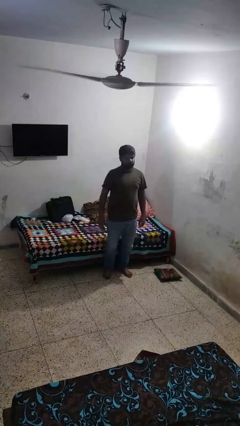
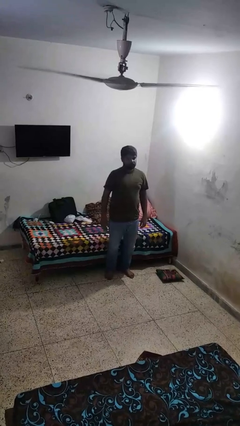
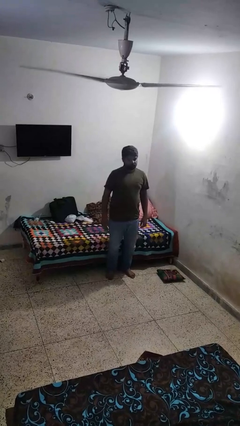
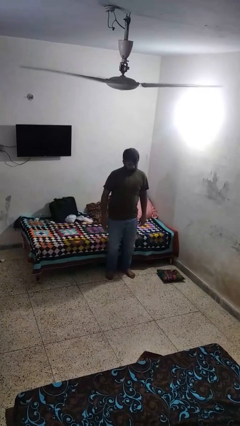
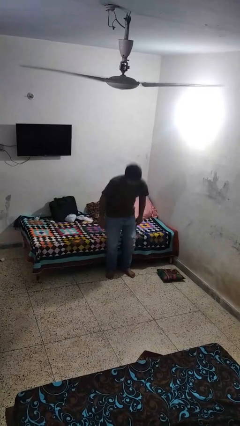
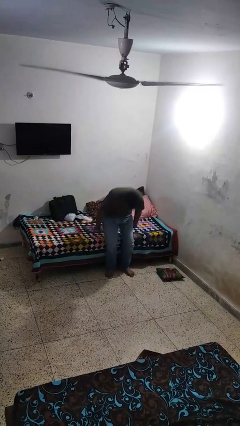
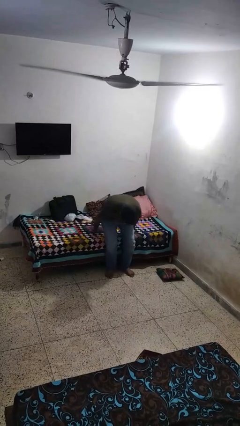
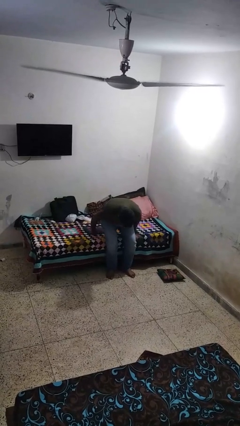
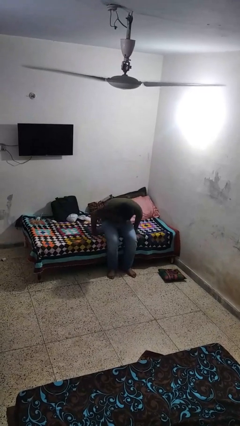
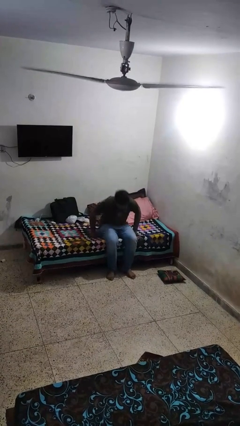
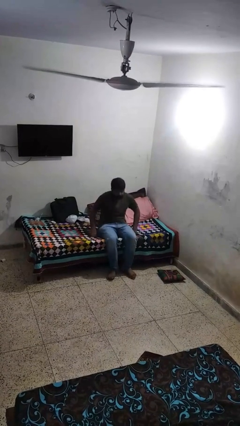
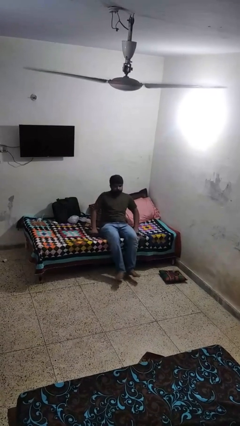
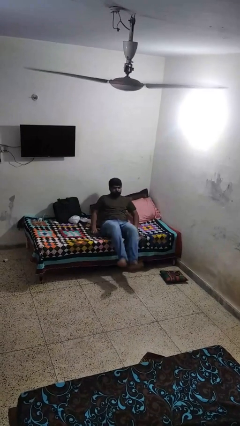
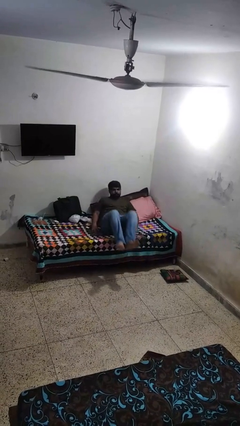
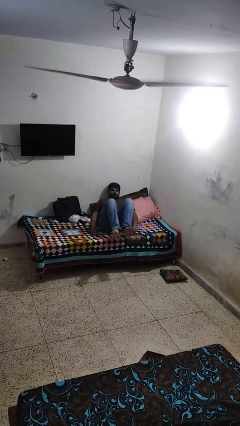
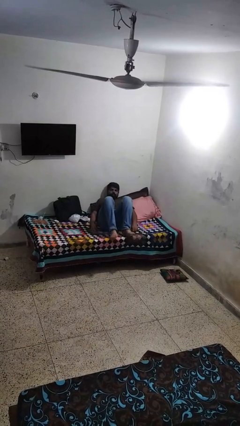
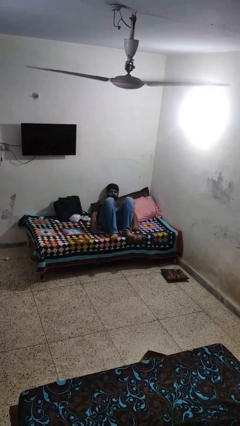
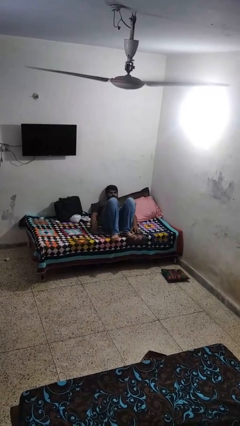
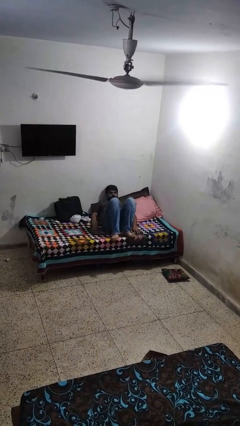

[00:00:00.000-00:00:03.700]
person lies down on bed

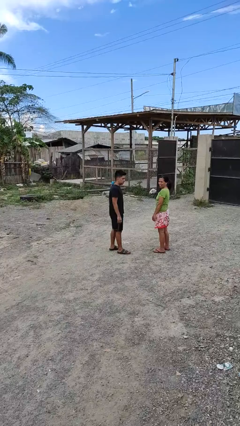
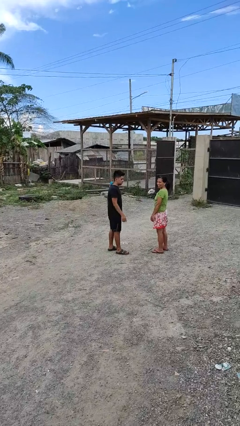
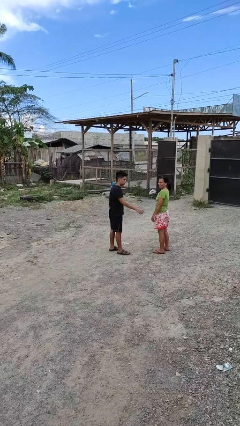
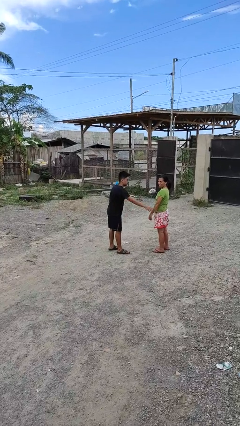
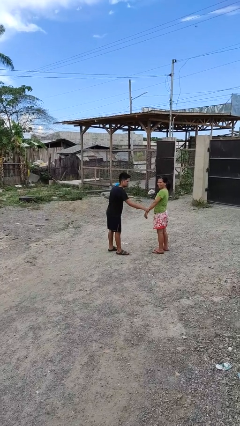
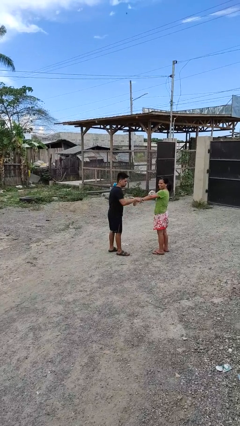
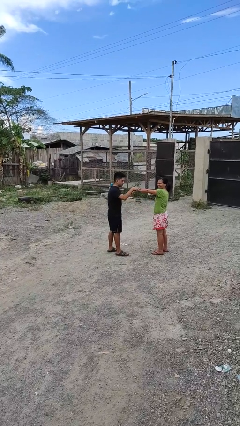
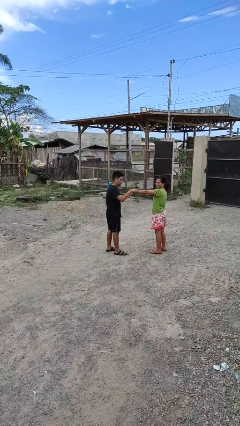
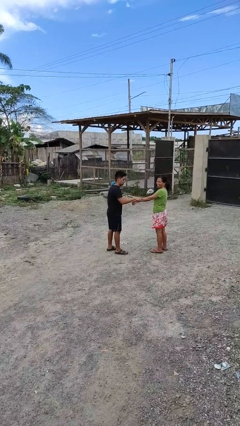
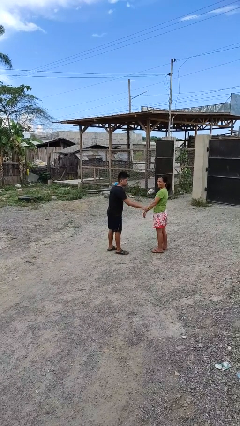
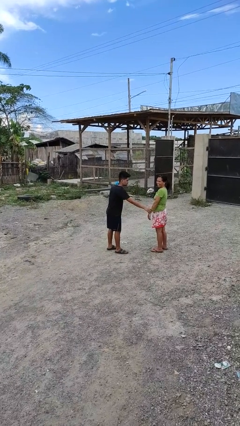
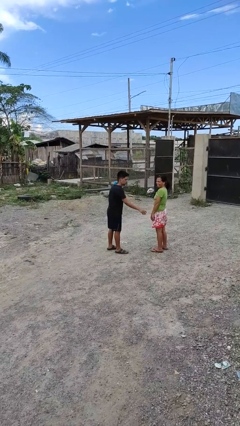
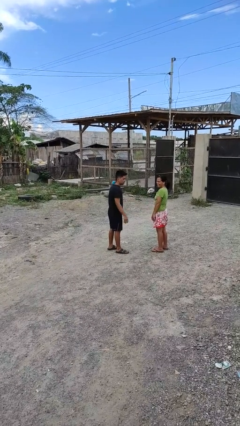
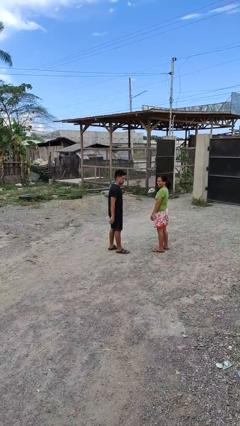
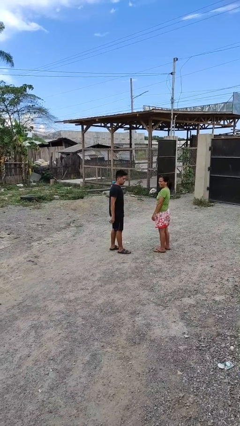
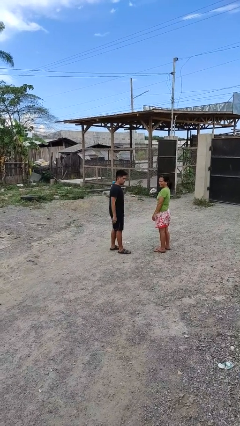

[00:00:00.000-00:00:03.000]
person grabs person by forearm

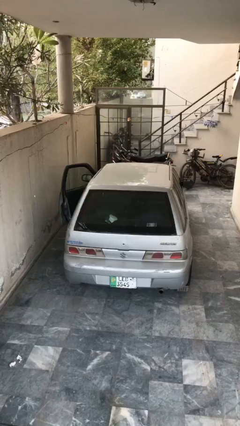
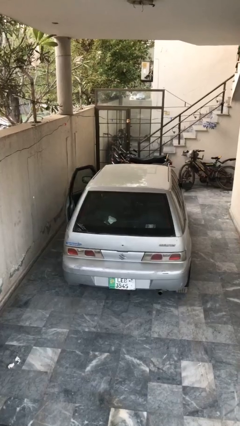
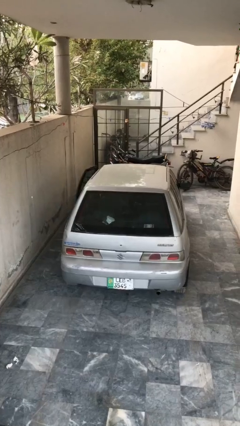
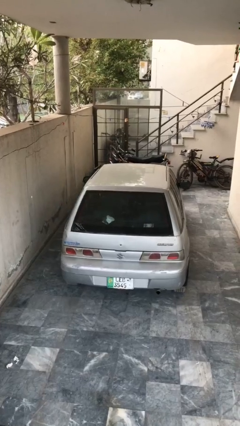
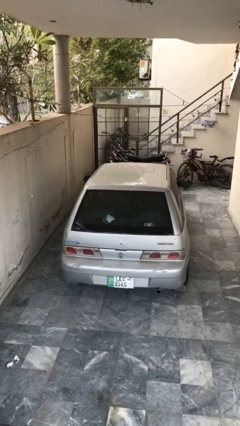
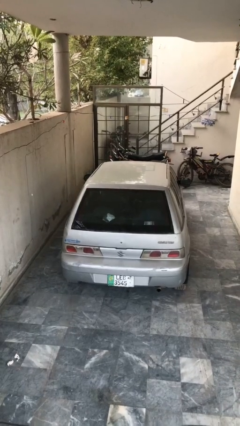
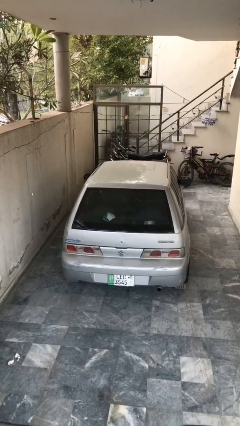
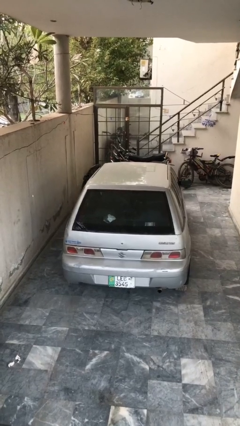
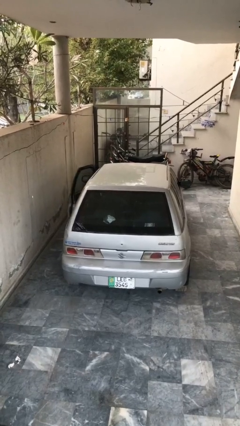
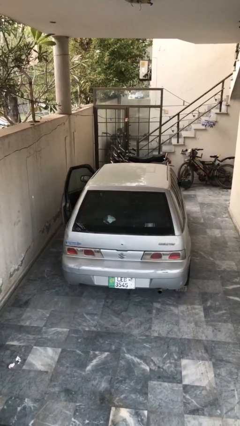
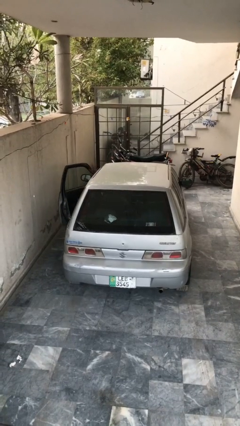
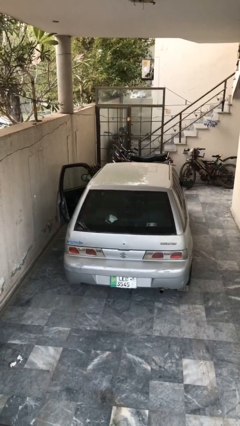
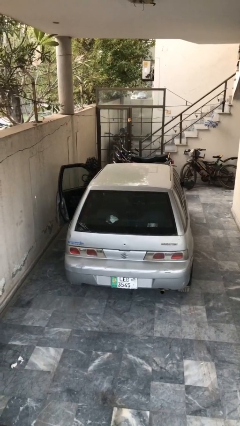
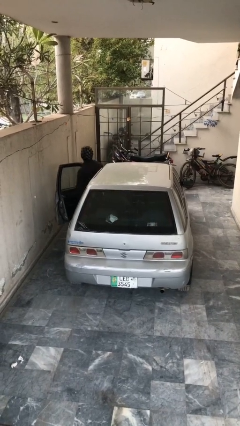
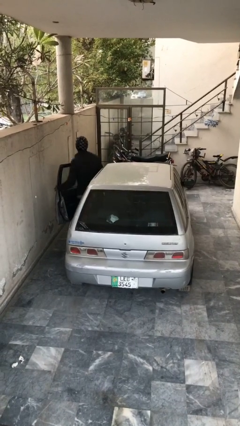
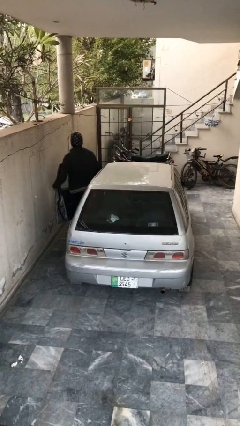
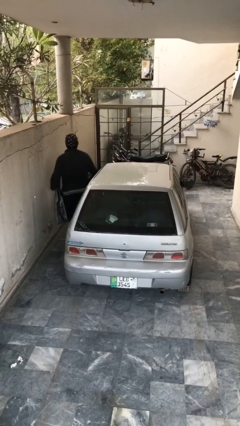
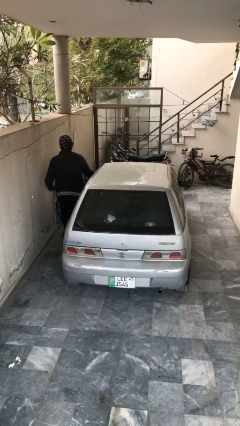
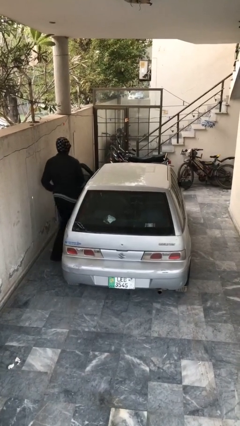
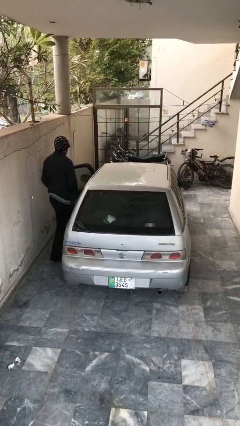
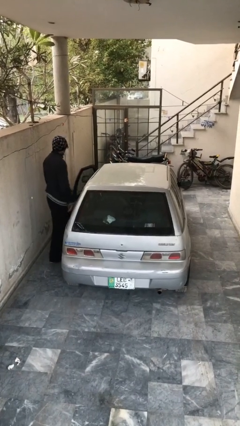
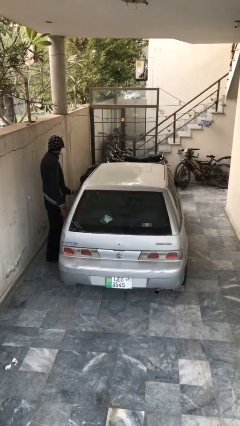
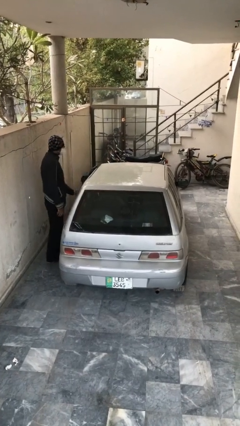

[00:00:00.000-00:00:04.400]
car drops off person

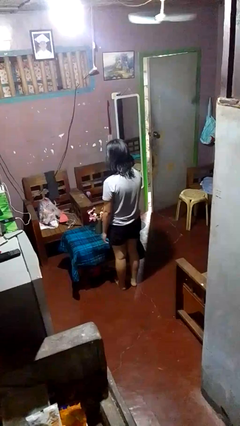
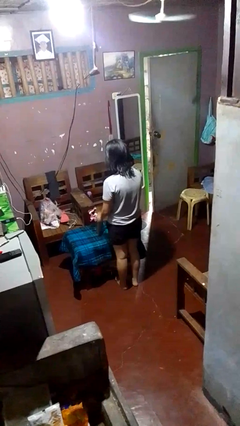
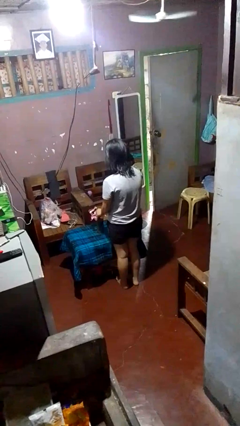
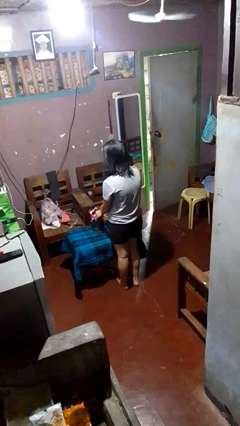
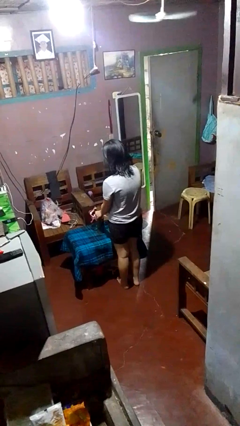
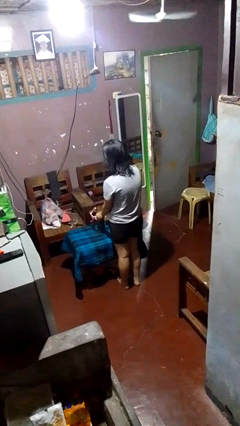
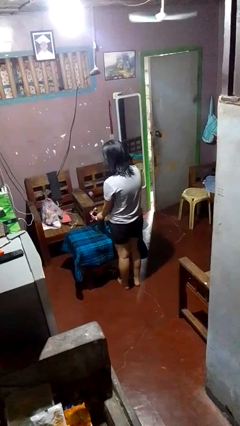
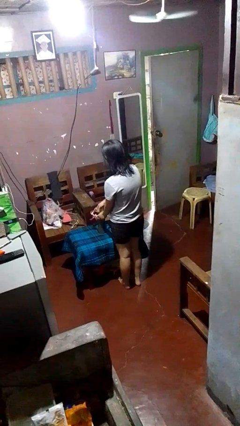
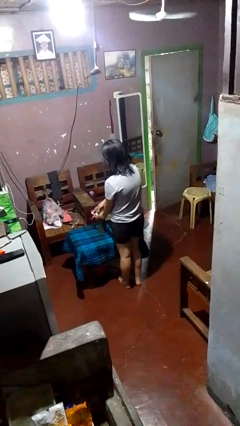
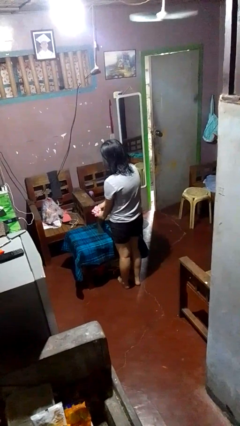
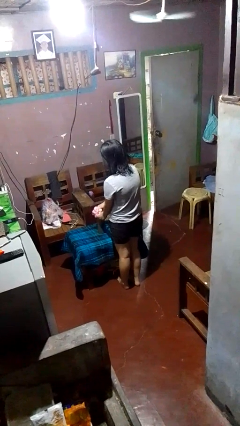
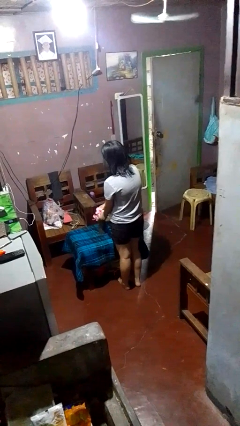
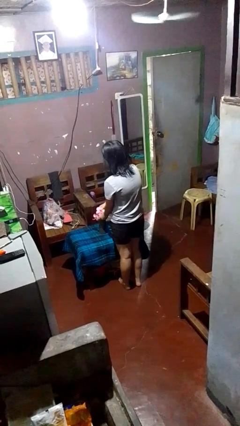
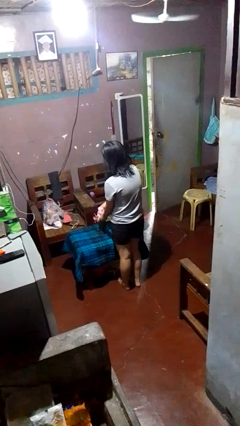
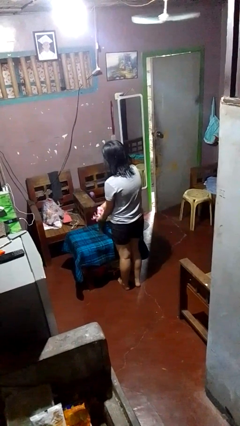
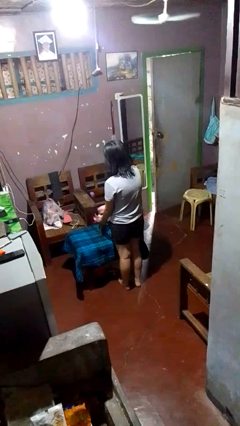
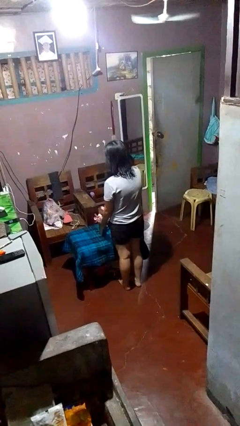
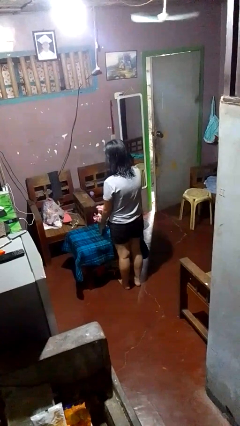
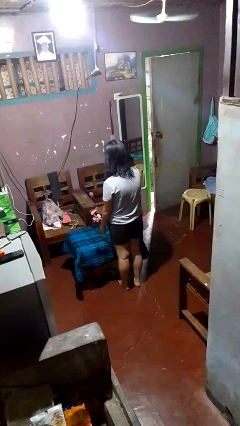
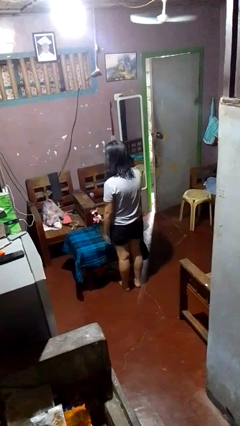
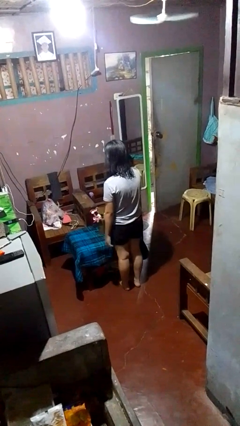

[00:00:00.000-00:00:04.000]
person arranges flowers in vase

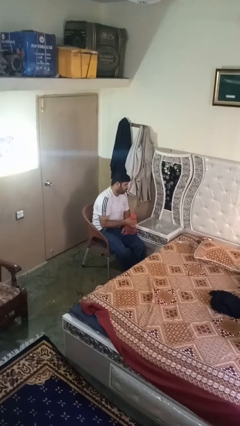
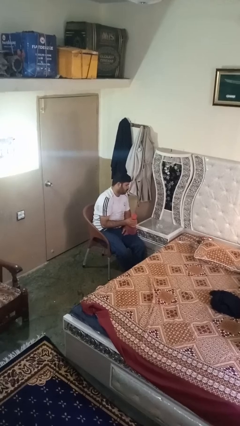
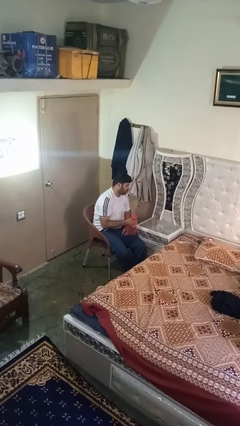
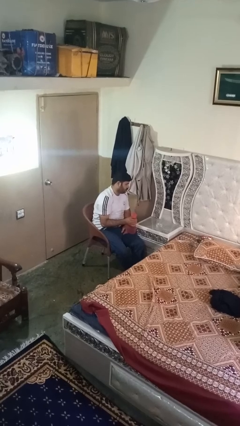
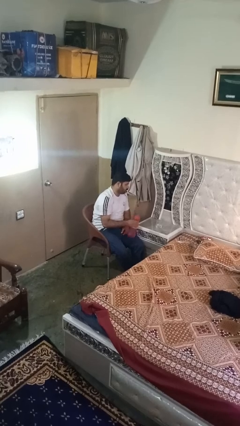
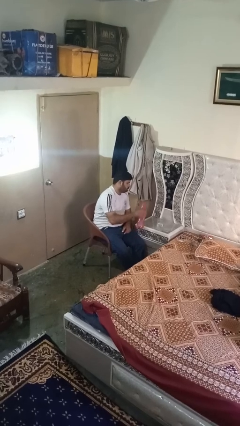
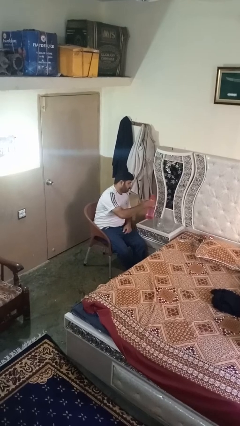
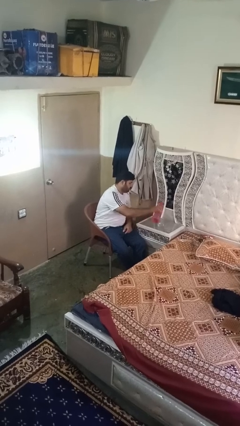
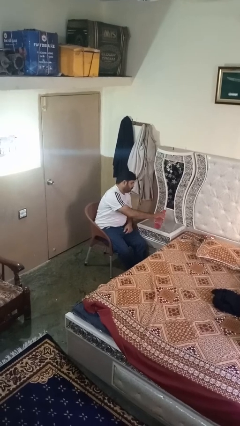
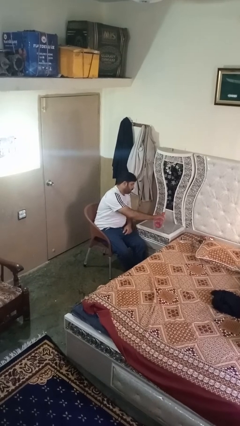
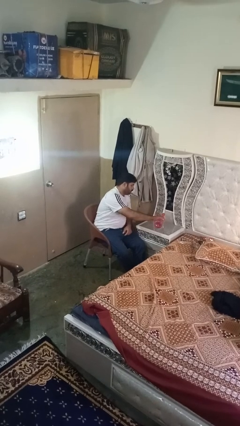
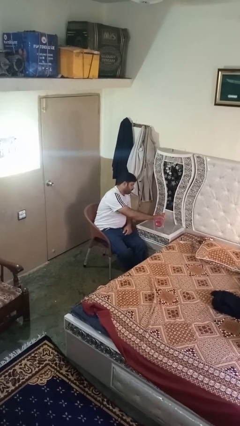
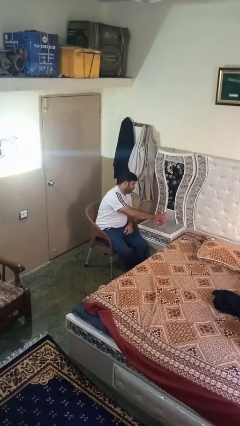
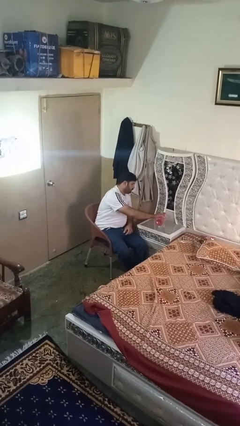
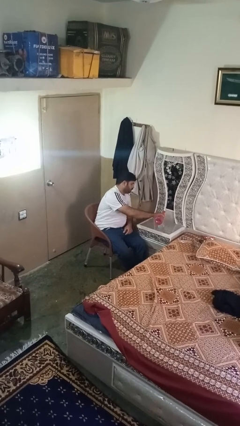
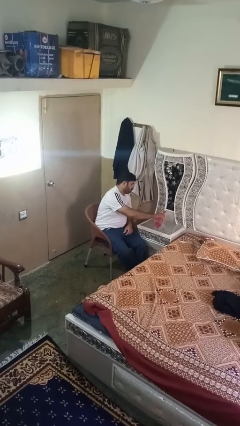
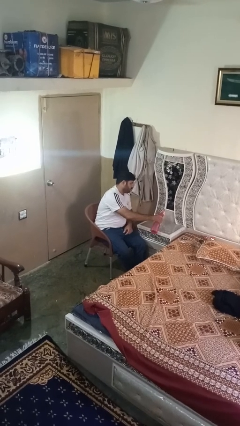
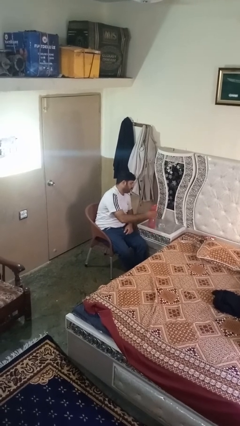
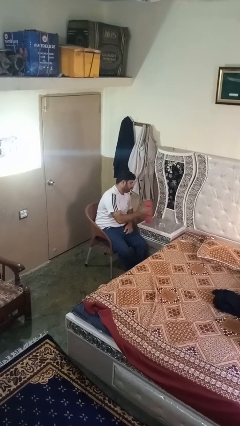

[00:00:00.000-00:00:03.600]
person pours liquid into cup
